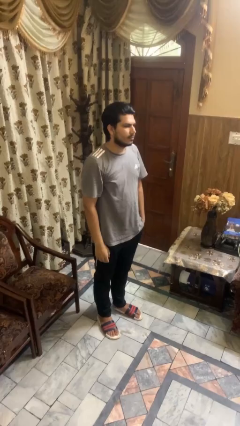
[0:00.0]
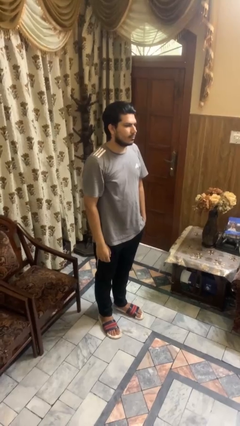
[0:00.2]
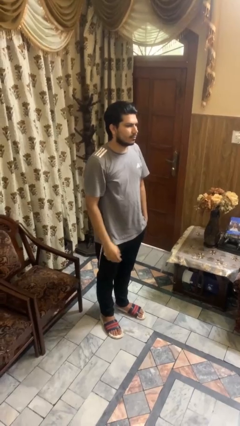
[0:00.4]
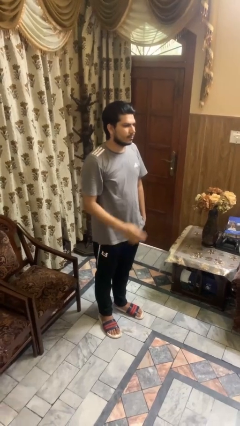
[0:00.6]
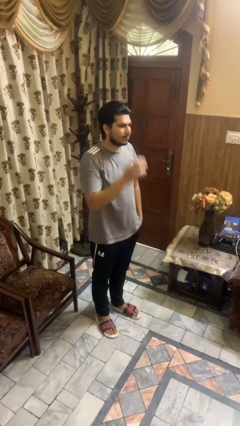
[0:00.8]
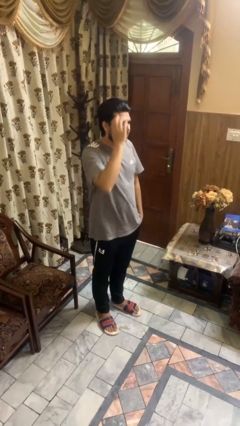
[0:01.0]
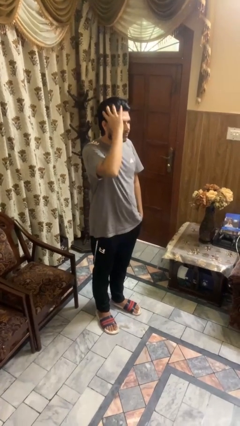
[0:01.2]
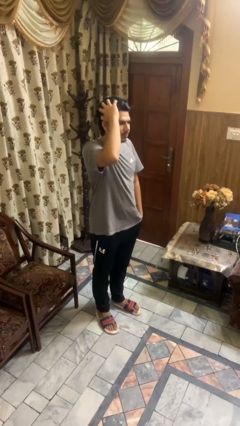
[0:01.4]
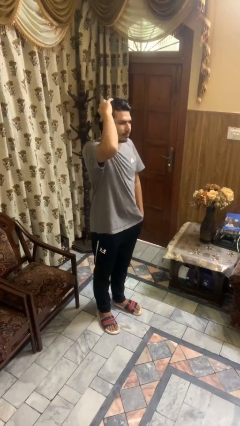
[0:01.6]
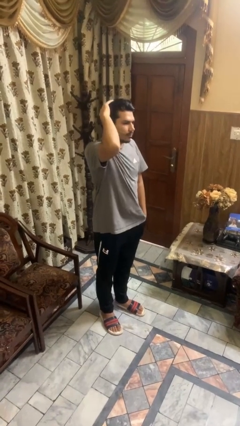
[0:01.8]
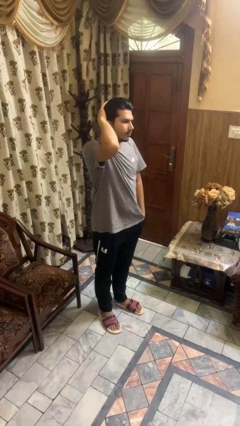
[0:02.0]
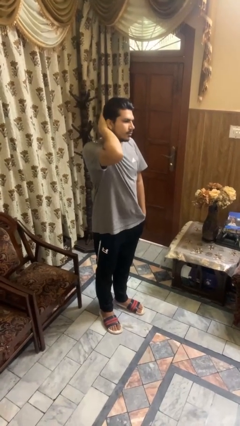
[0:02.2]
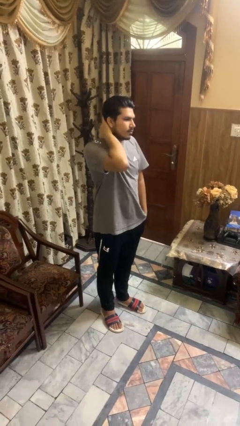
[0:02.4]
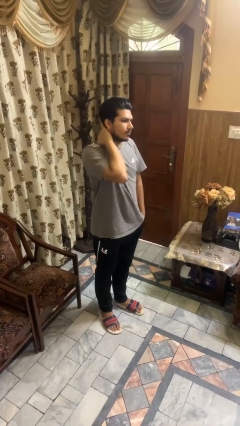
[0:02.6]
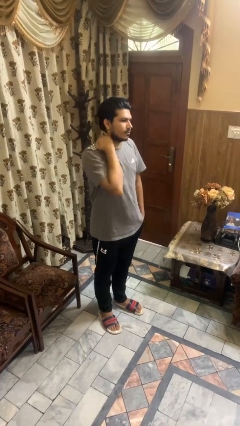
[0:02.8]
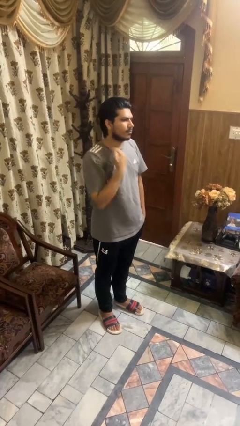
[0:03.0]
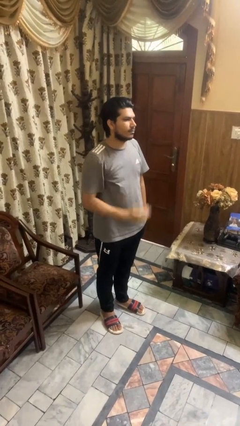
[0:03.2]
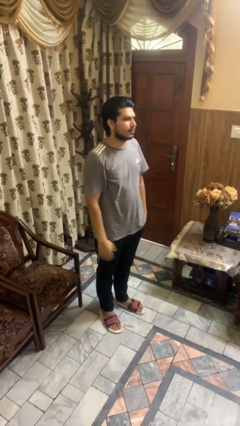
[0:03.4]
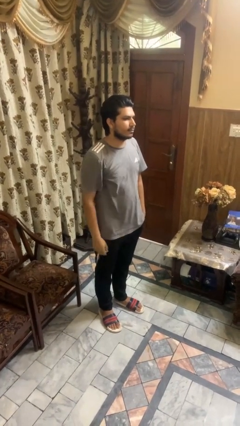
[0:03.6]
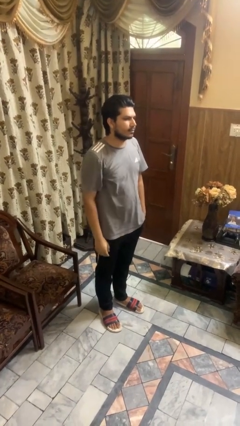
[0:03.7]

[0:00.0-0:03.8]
person strokes hair

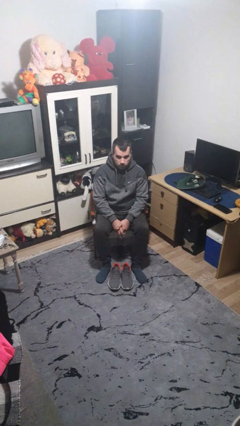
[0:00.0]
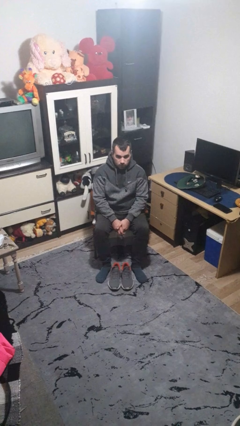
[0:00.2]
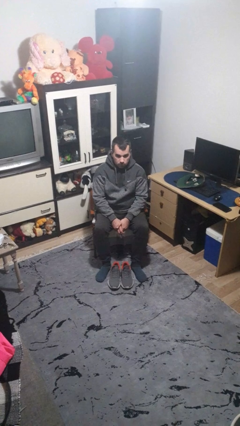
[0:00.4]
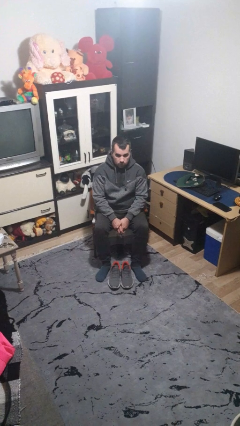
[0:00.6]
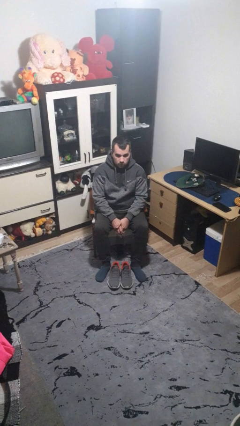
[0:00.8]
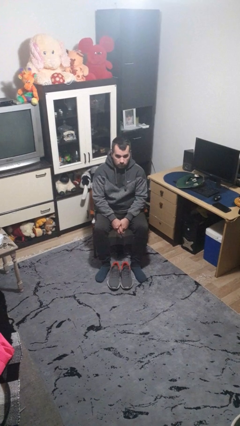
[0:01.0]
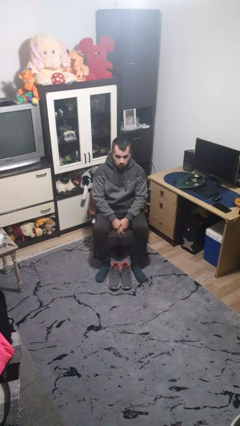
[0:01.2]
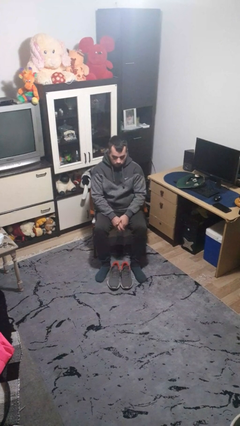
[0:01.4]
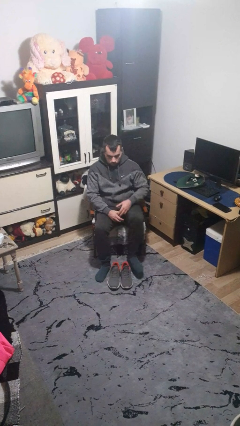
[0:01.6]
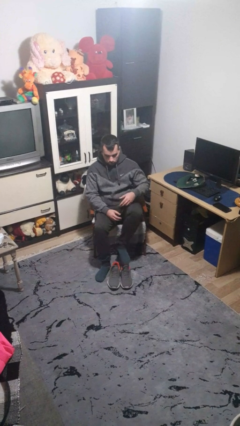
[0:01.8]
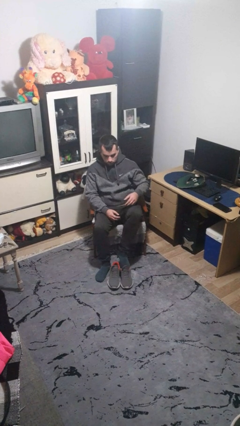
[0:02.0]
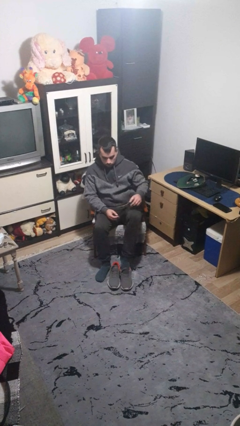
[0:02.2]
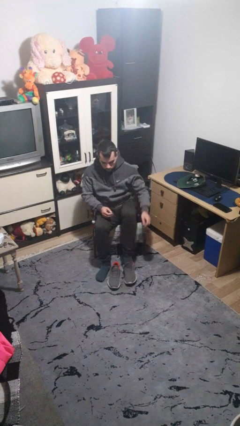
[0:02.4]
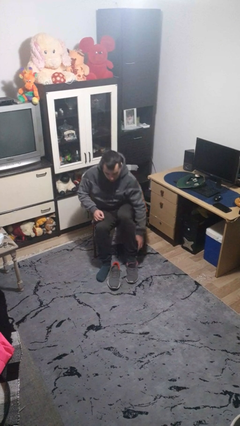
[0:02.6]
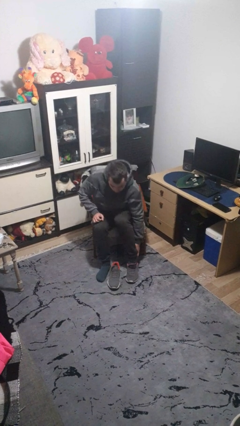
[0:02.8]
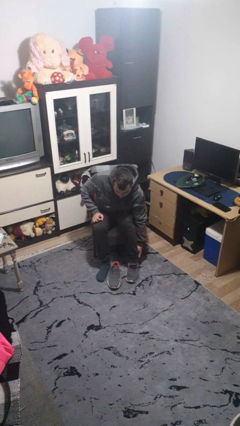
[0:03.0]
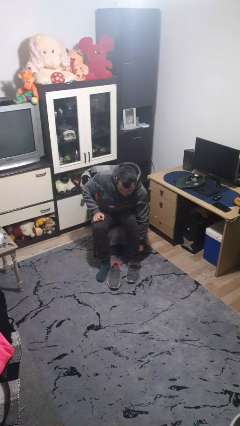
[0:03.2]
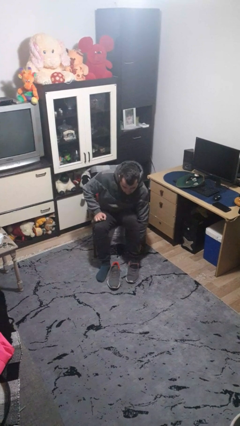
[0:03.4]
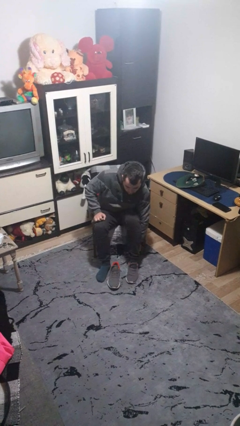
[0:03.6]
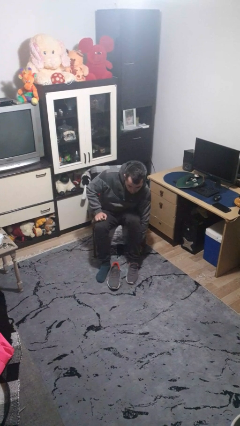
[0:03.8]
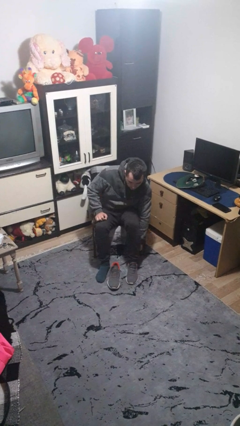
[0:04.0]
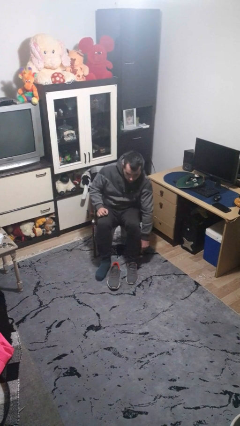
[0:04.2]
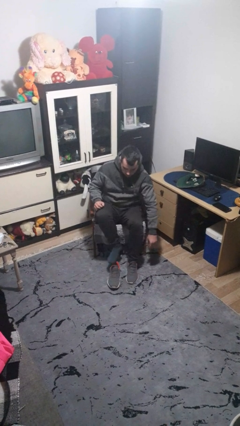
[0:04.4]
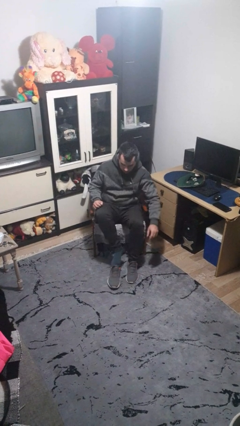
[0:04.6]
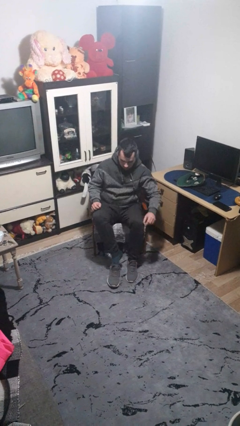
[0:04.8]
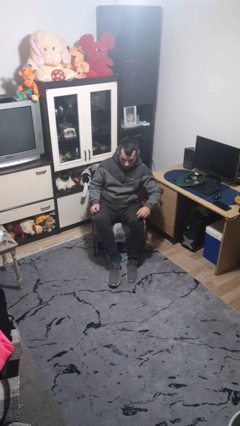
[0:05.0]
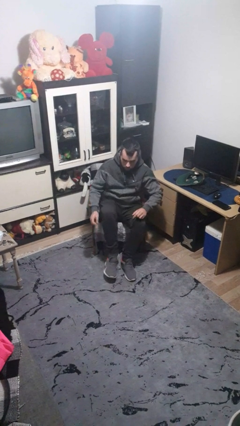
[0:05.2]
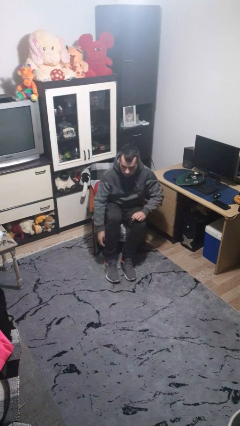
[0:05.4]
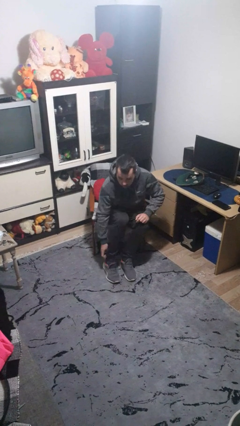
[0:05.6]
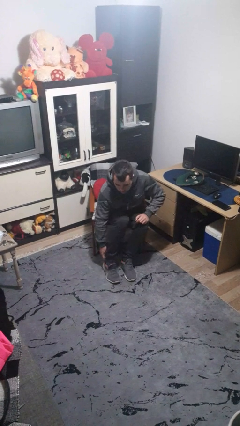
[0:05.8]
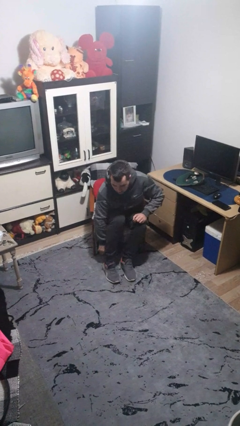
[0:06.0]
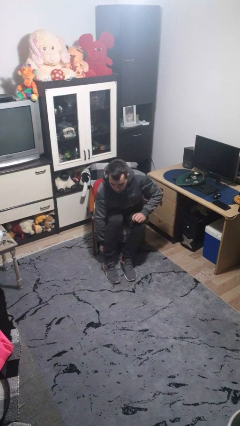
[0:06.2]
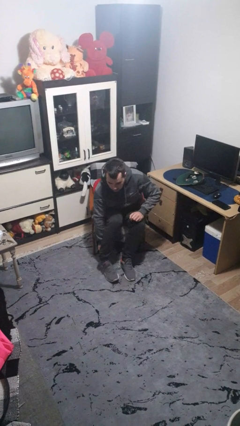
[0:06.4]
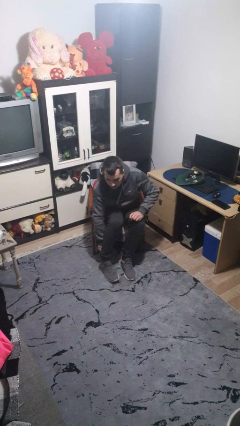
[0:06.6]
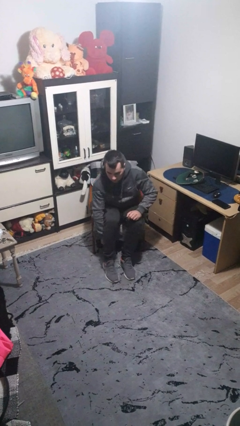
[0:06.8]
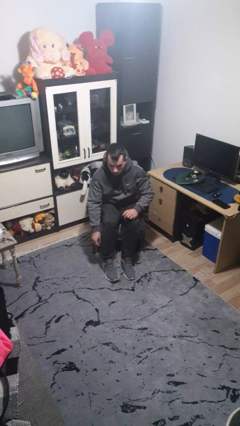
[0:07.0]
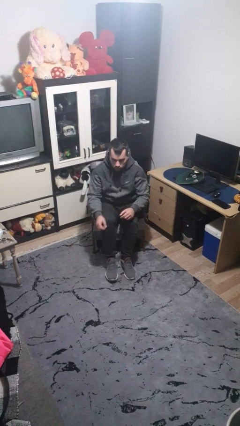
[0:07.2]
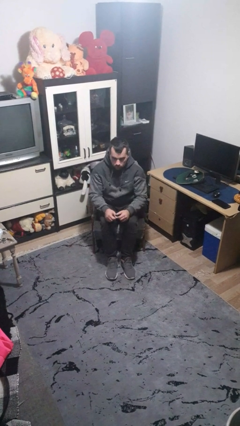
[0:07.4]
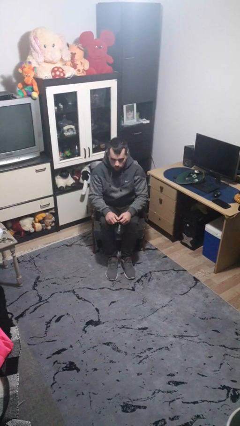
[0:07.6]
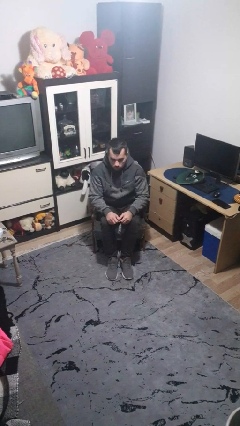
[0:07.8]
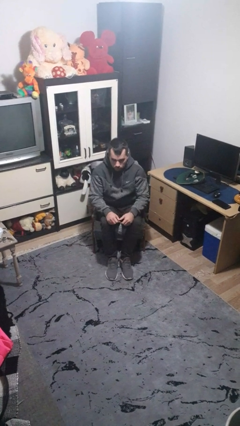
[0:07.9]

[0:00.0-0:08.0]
person puts on shoes

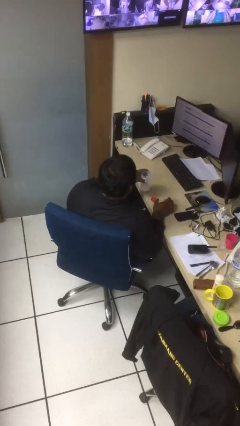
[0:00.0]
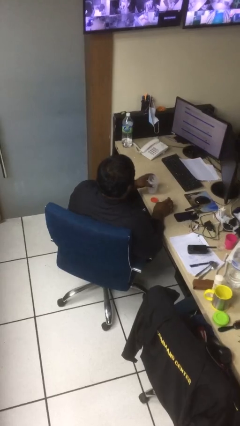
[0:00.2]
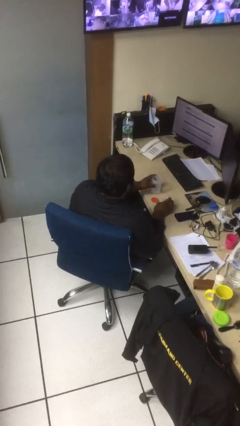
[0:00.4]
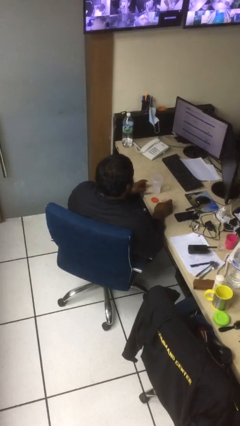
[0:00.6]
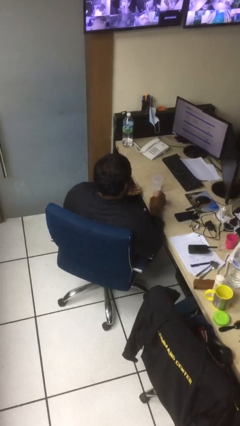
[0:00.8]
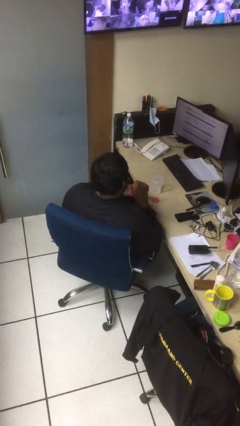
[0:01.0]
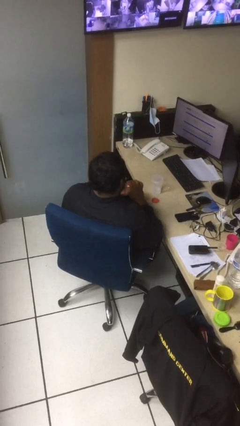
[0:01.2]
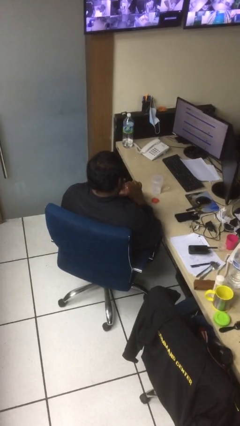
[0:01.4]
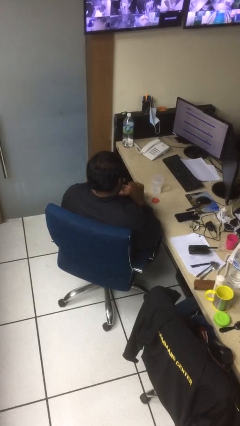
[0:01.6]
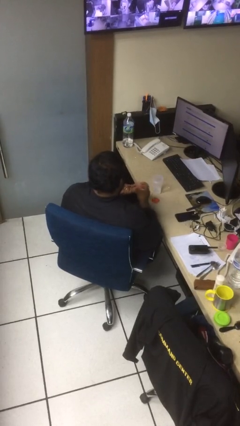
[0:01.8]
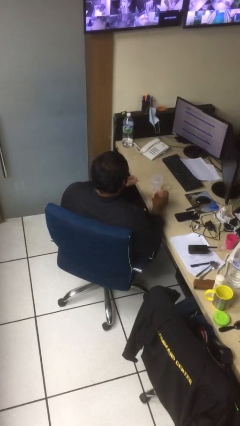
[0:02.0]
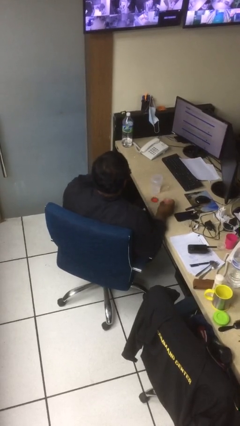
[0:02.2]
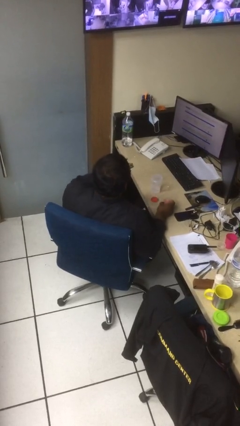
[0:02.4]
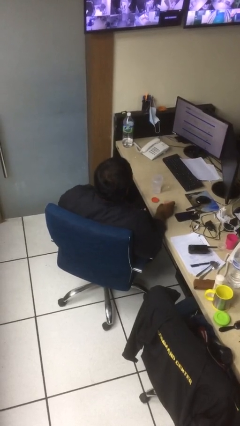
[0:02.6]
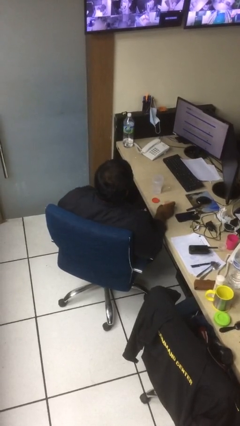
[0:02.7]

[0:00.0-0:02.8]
person takes medicine pills

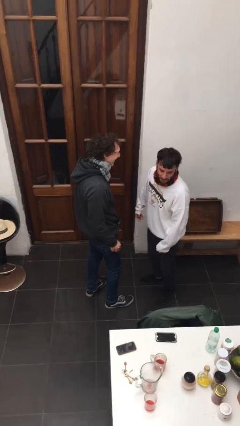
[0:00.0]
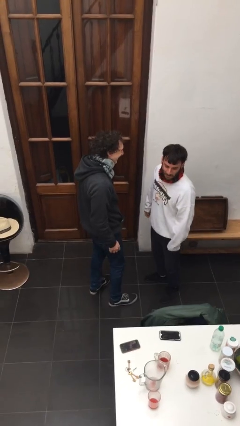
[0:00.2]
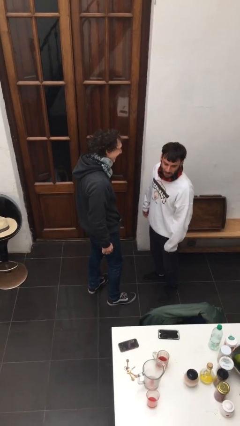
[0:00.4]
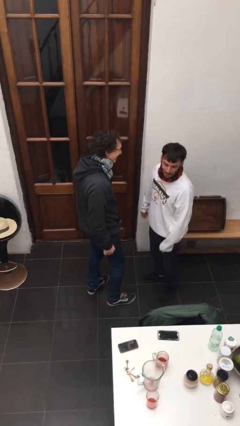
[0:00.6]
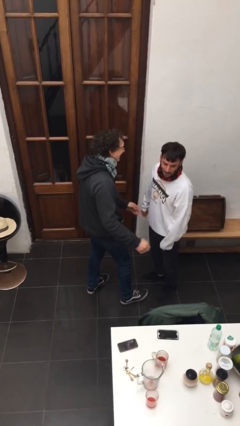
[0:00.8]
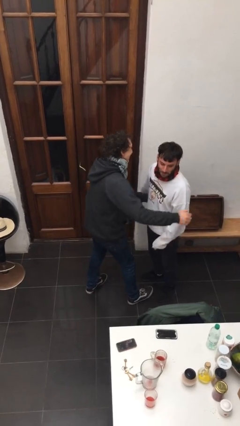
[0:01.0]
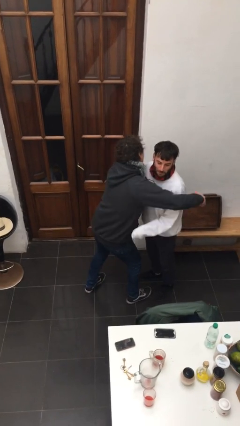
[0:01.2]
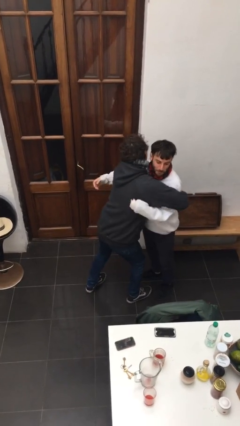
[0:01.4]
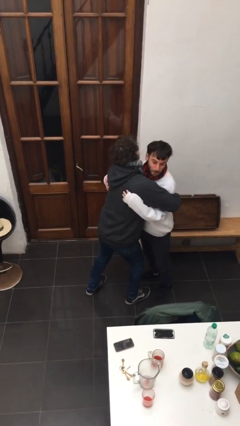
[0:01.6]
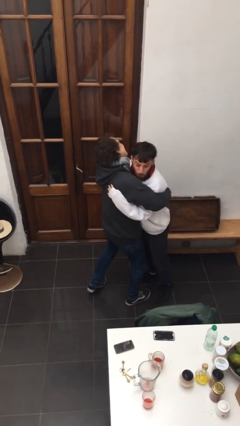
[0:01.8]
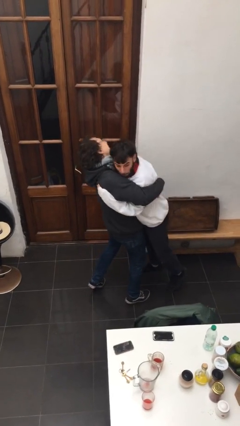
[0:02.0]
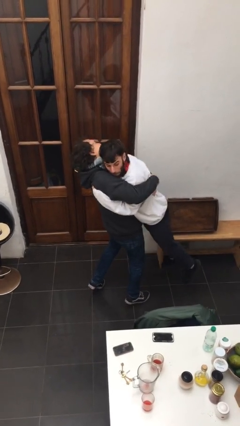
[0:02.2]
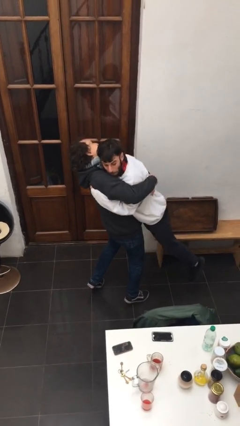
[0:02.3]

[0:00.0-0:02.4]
person picks up person

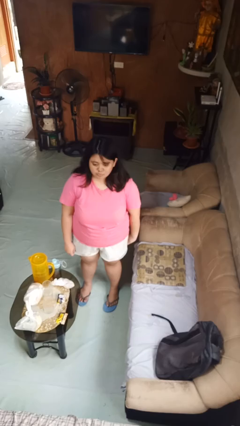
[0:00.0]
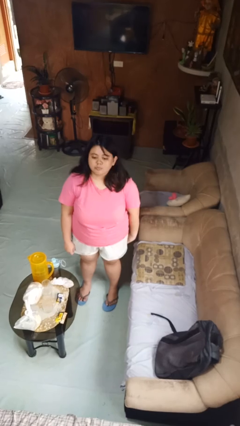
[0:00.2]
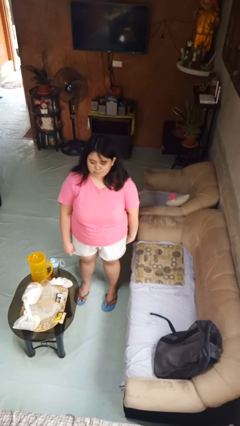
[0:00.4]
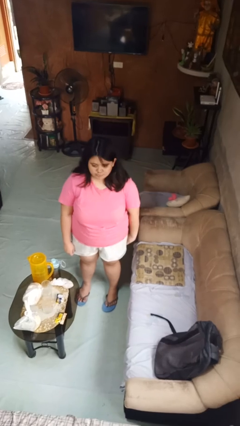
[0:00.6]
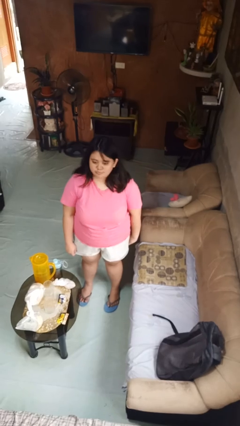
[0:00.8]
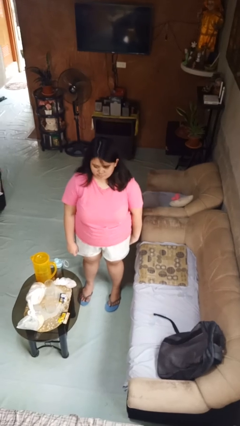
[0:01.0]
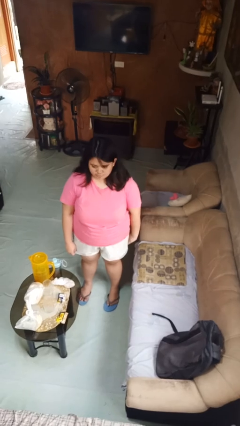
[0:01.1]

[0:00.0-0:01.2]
person nods head
